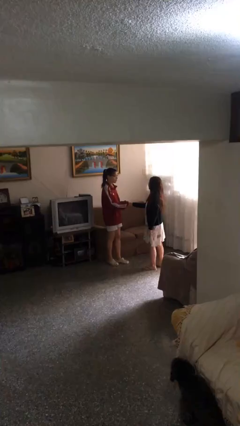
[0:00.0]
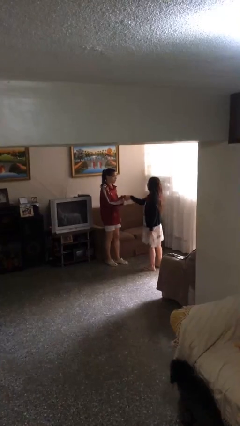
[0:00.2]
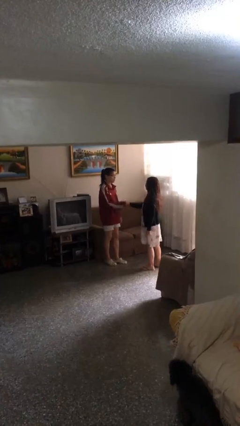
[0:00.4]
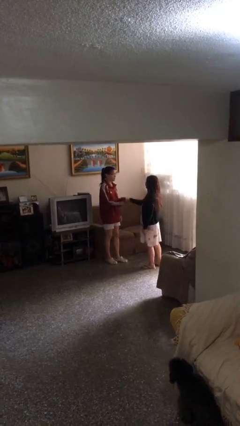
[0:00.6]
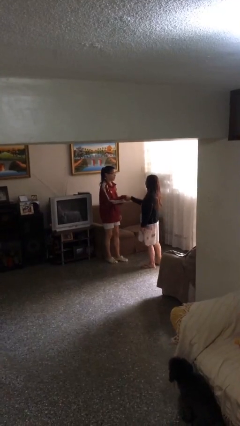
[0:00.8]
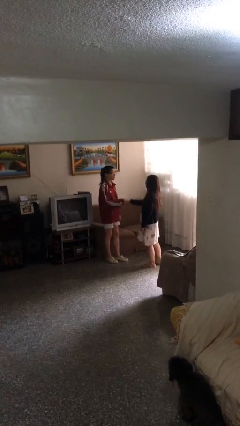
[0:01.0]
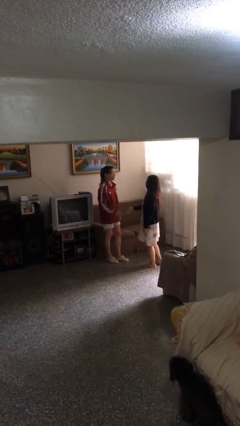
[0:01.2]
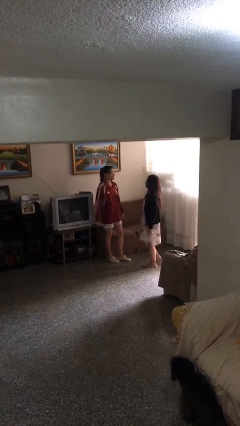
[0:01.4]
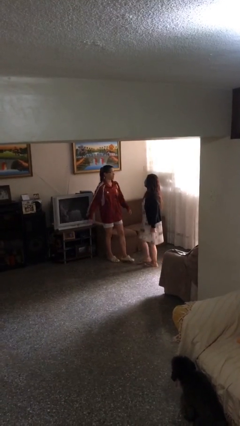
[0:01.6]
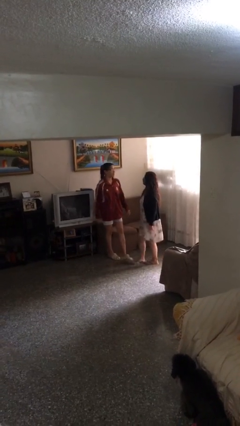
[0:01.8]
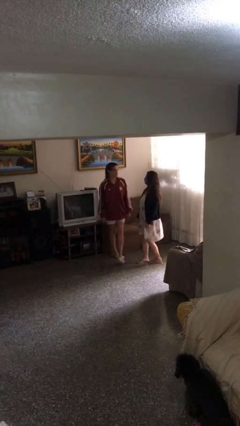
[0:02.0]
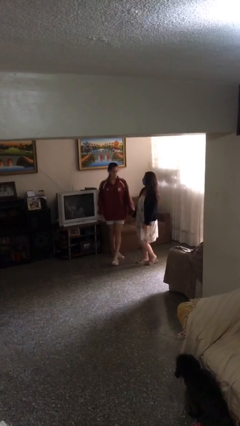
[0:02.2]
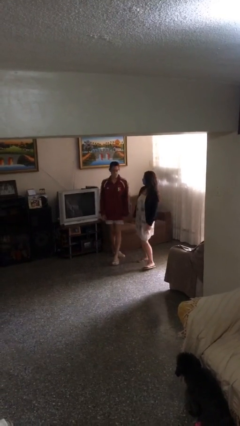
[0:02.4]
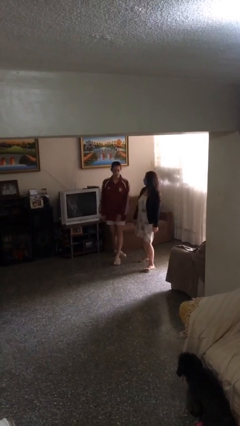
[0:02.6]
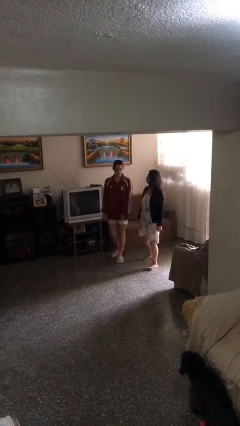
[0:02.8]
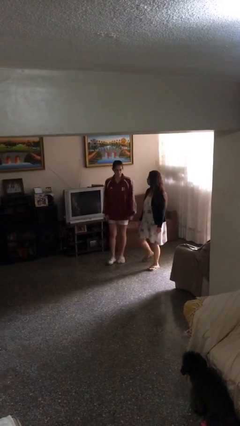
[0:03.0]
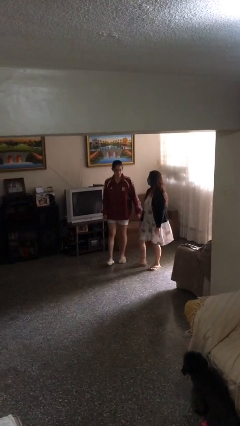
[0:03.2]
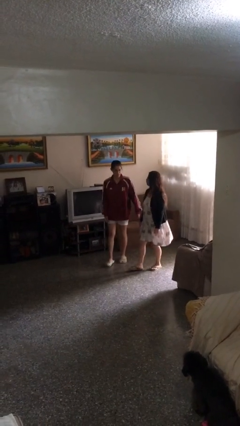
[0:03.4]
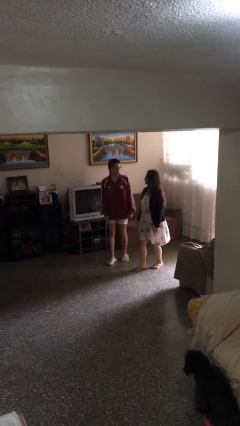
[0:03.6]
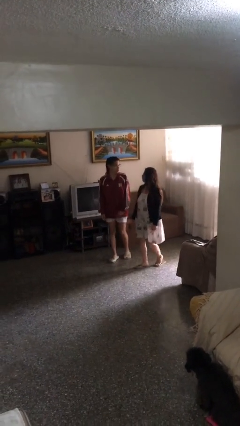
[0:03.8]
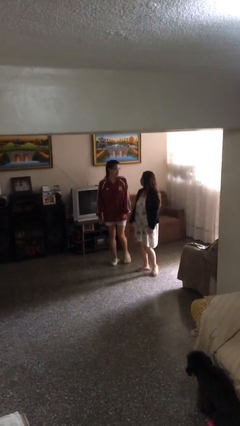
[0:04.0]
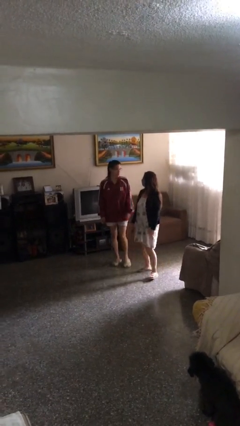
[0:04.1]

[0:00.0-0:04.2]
person shakes hand

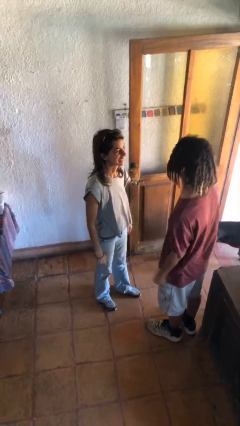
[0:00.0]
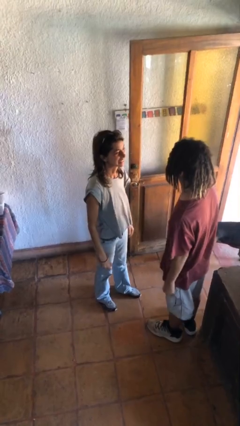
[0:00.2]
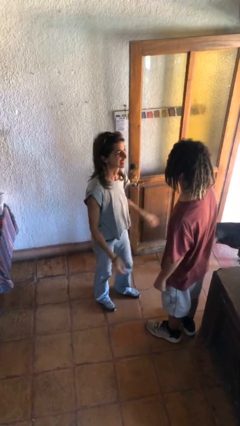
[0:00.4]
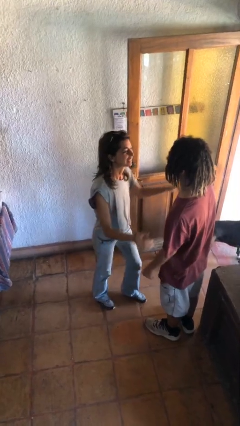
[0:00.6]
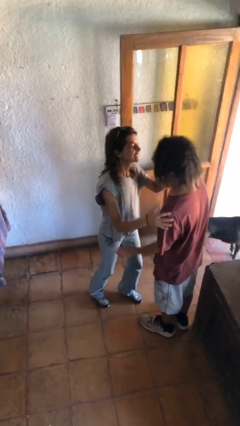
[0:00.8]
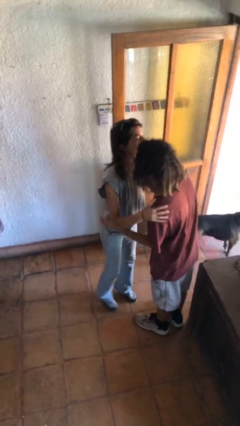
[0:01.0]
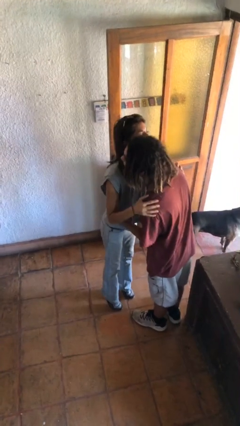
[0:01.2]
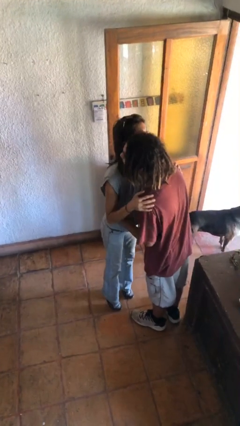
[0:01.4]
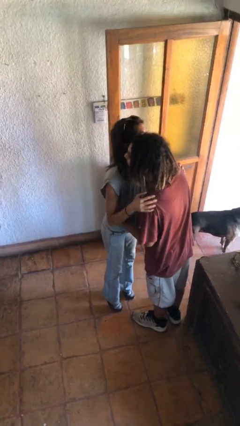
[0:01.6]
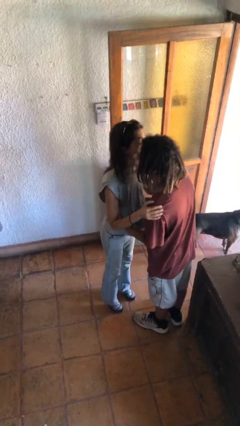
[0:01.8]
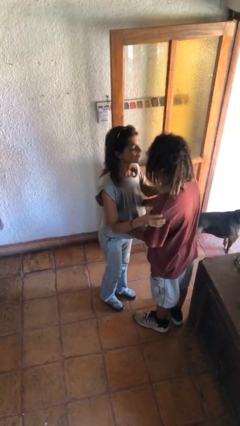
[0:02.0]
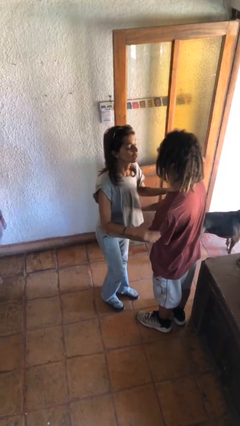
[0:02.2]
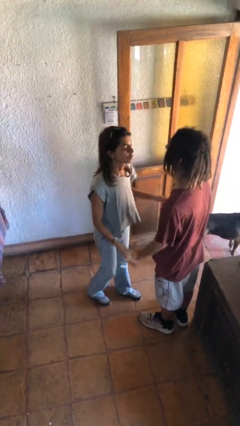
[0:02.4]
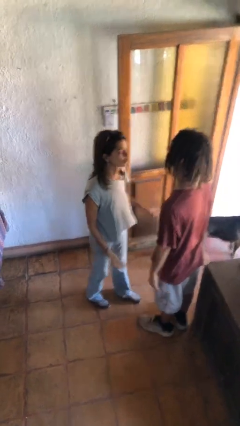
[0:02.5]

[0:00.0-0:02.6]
person kisses cheek of person

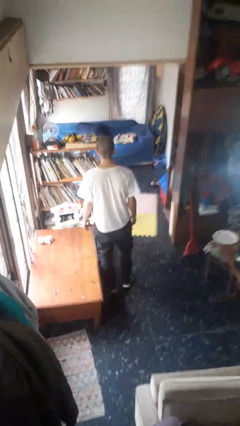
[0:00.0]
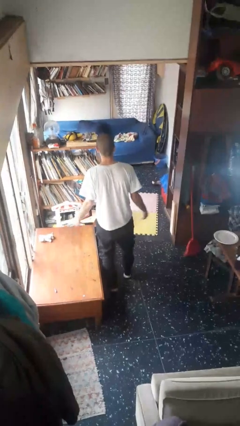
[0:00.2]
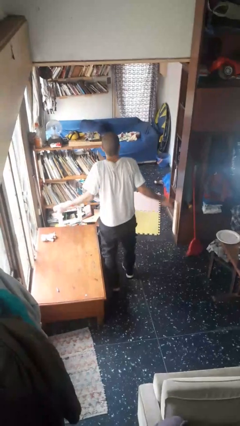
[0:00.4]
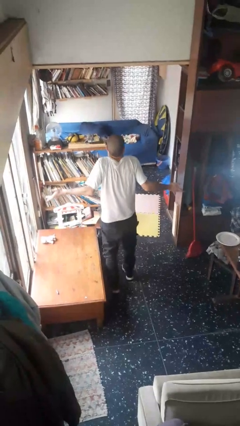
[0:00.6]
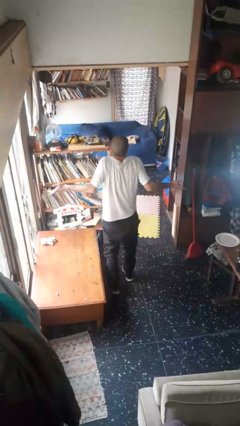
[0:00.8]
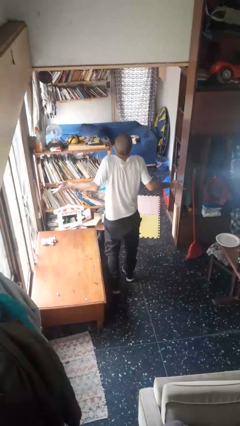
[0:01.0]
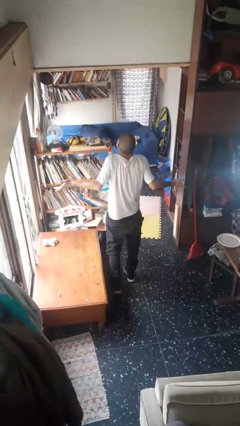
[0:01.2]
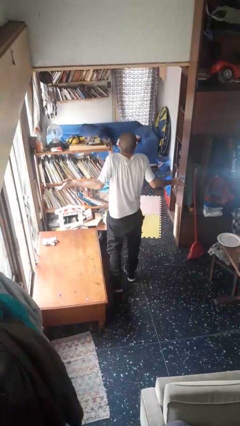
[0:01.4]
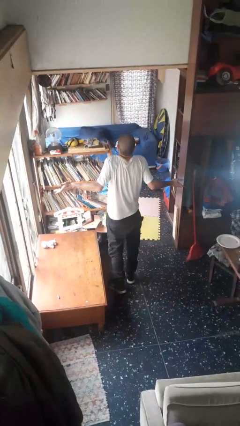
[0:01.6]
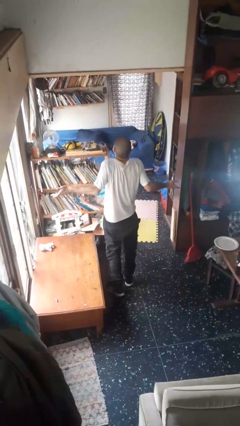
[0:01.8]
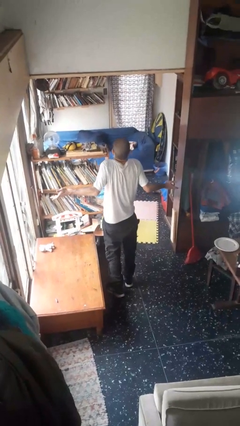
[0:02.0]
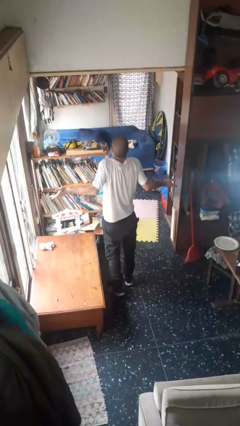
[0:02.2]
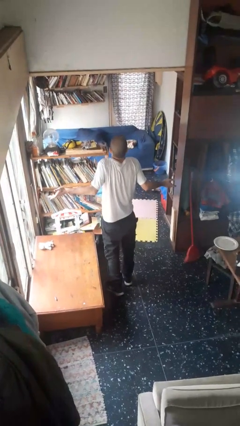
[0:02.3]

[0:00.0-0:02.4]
person shrugs

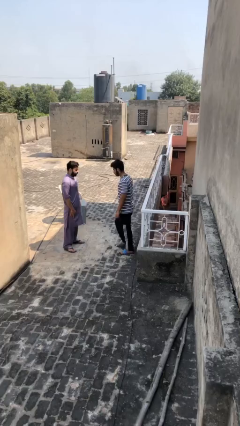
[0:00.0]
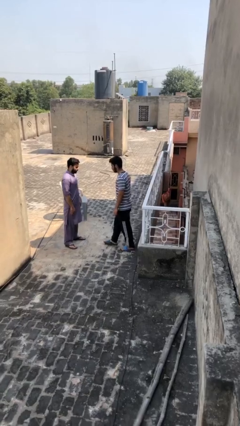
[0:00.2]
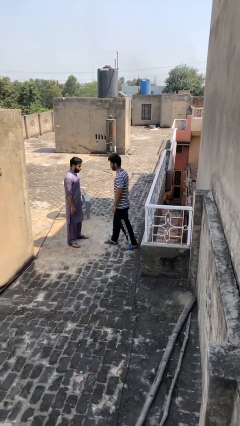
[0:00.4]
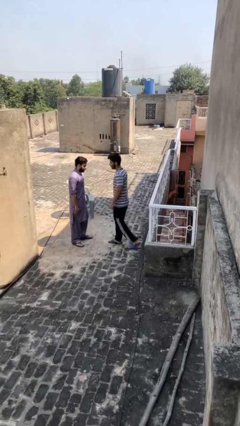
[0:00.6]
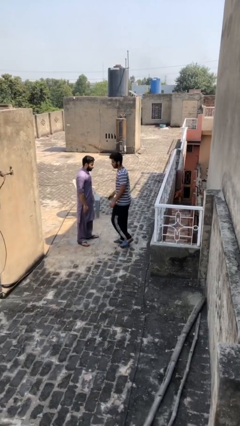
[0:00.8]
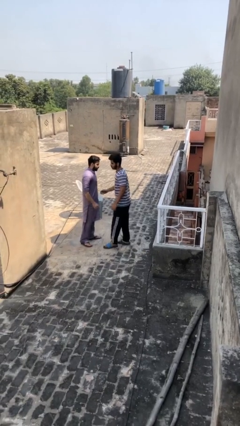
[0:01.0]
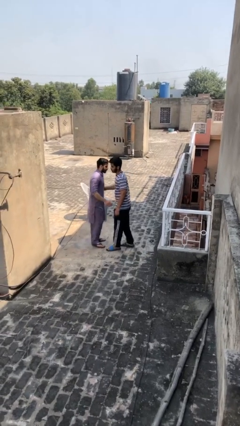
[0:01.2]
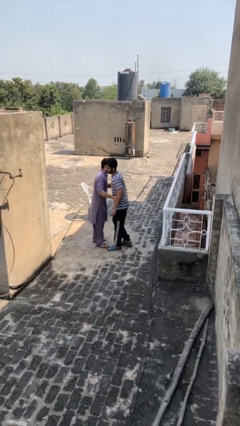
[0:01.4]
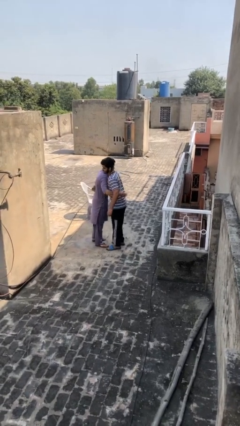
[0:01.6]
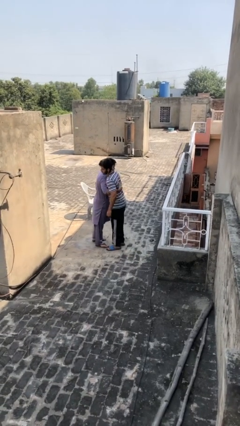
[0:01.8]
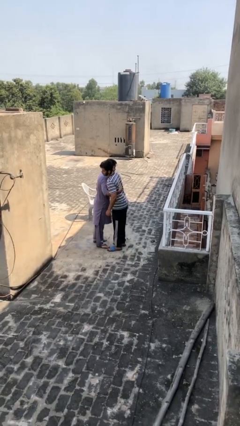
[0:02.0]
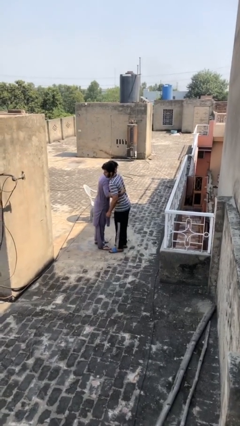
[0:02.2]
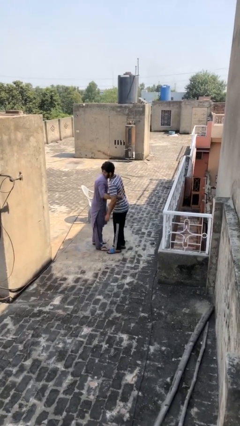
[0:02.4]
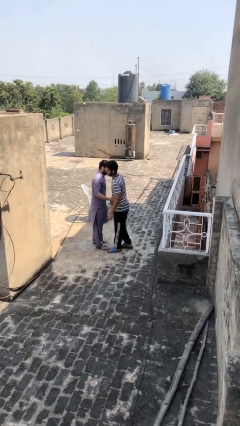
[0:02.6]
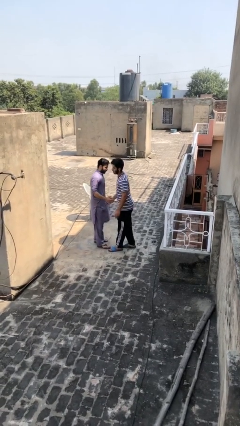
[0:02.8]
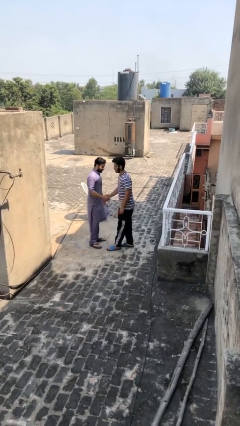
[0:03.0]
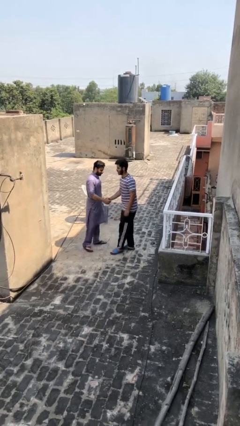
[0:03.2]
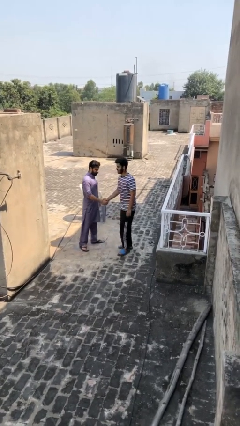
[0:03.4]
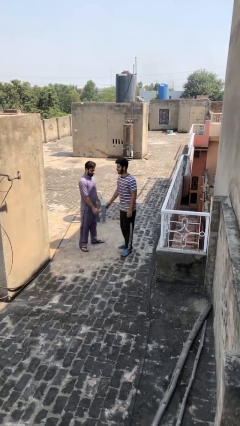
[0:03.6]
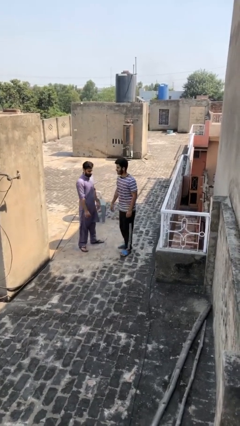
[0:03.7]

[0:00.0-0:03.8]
person embraces person

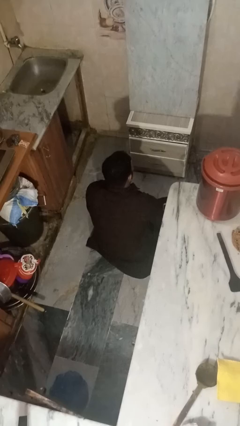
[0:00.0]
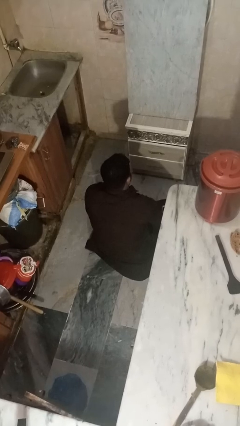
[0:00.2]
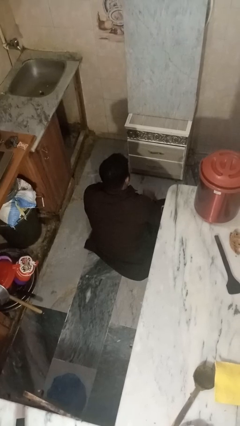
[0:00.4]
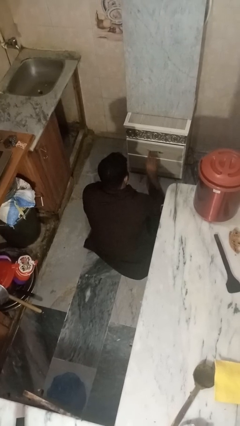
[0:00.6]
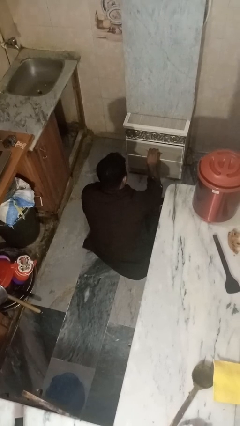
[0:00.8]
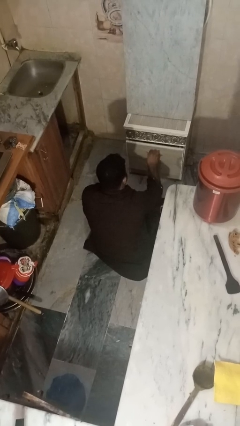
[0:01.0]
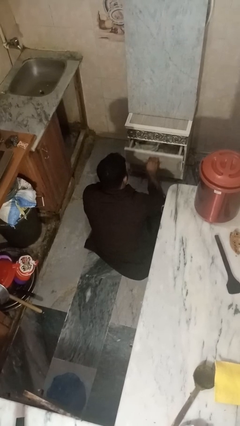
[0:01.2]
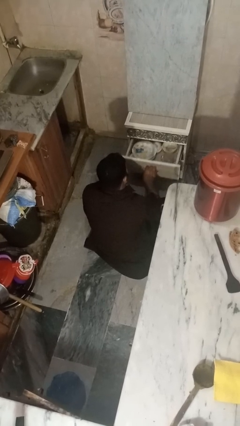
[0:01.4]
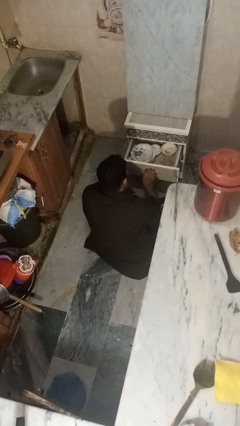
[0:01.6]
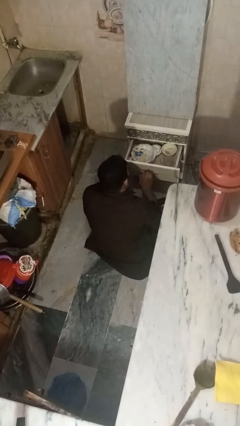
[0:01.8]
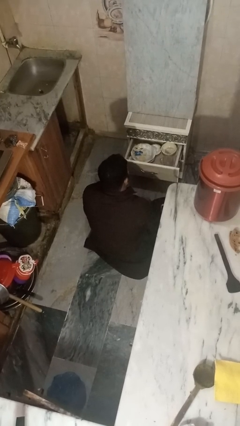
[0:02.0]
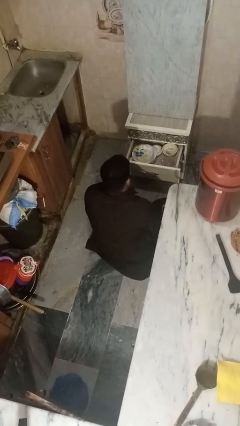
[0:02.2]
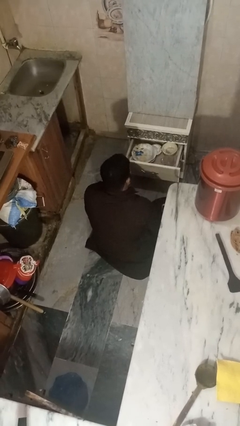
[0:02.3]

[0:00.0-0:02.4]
person opens kitchen drawer

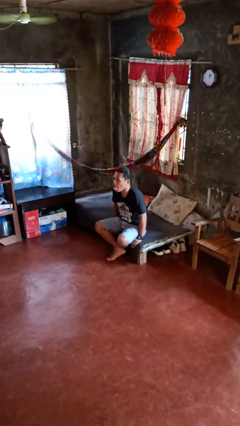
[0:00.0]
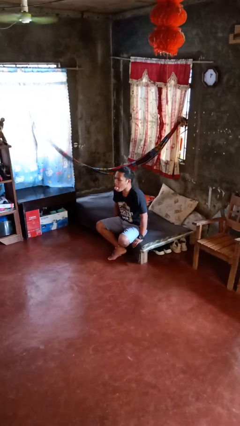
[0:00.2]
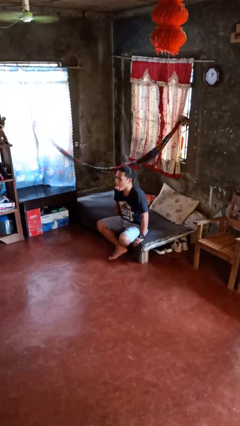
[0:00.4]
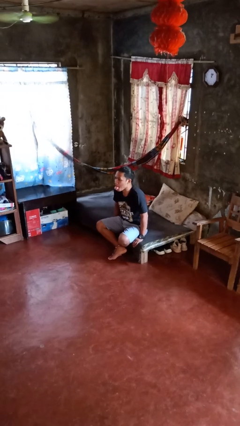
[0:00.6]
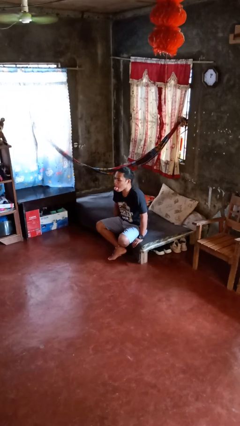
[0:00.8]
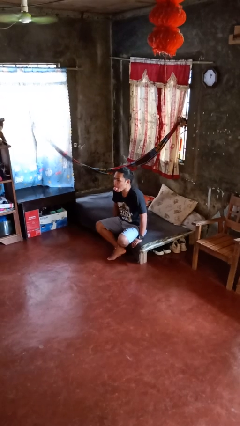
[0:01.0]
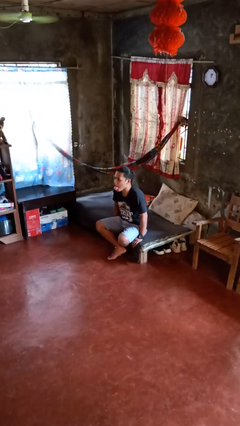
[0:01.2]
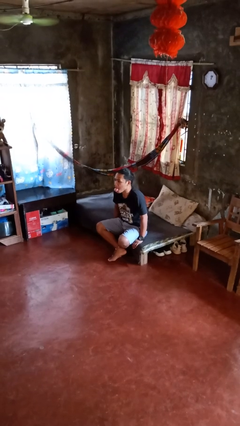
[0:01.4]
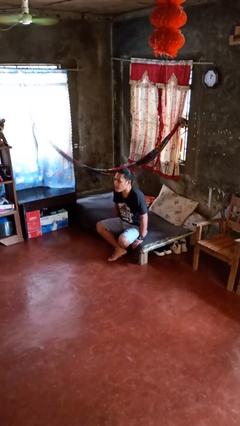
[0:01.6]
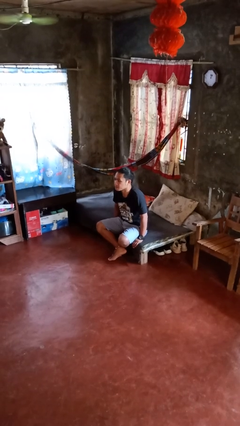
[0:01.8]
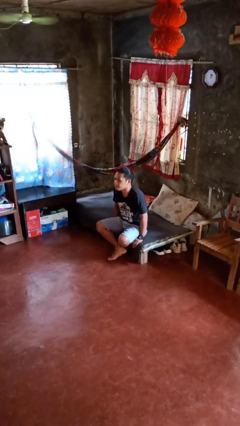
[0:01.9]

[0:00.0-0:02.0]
person sticks out tongue

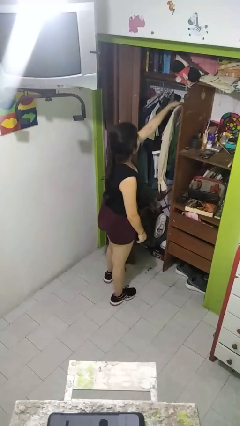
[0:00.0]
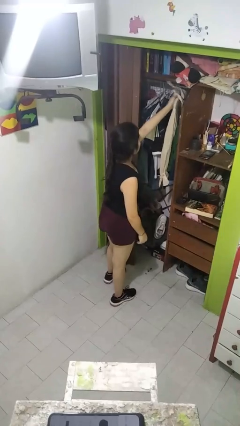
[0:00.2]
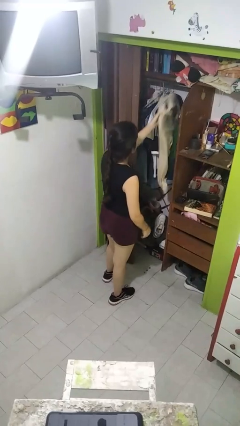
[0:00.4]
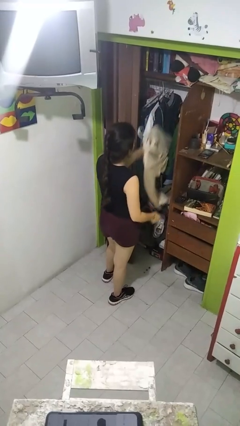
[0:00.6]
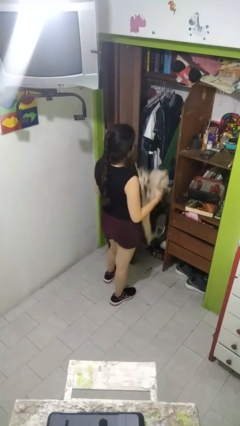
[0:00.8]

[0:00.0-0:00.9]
person takes clothes from closet
